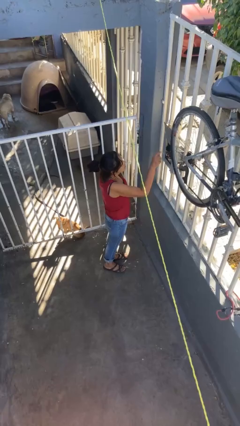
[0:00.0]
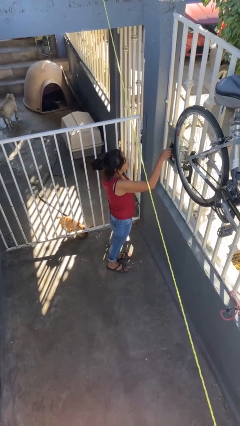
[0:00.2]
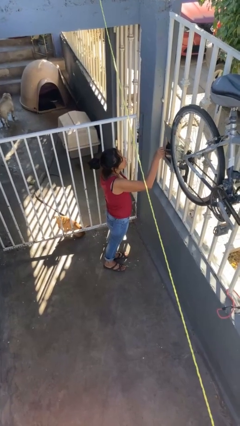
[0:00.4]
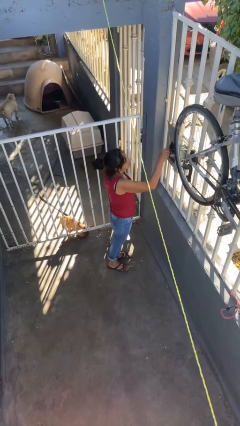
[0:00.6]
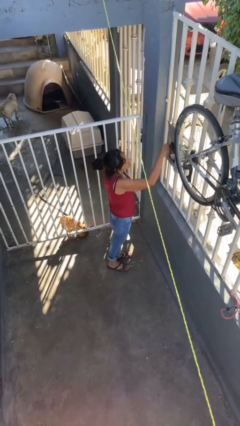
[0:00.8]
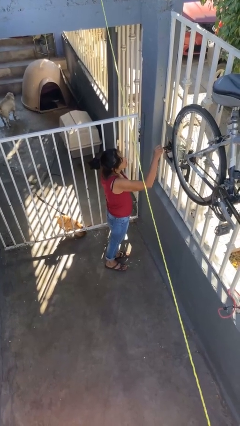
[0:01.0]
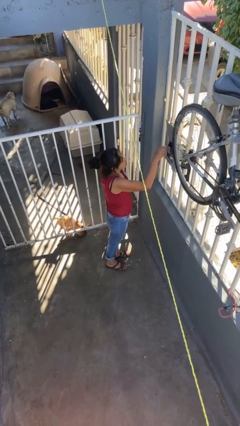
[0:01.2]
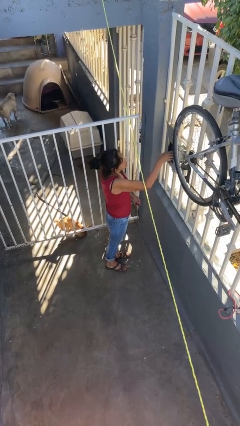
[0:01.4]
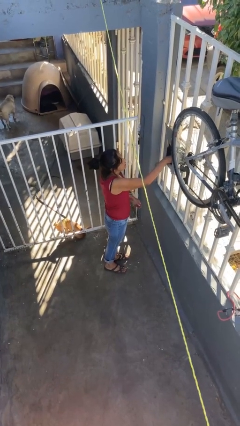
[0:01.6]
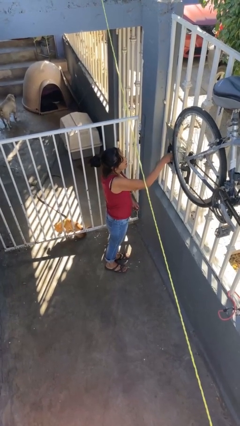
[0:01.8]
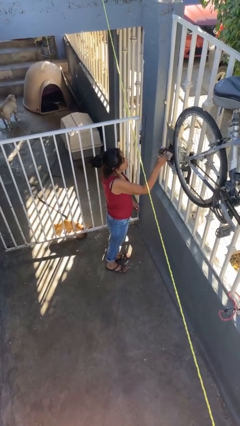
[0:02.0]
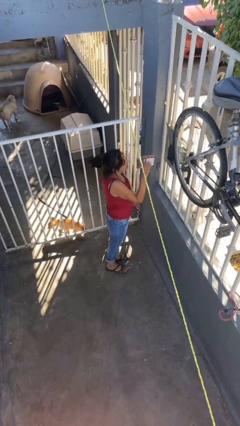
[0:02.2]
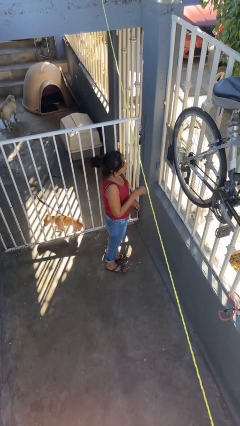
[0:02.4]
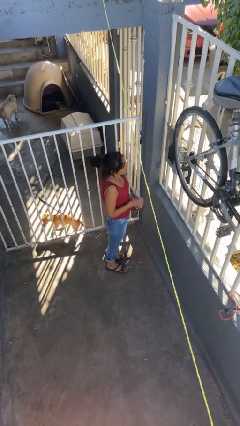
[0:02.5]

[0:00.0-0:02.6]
person takes letters from mailbox

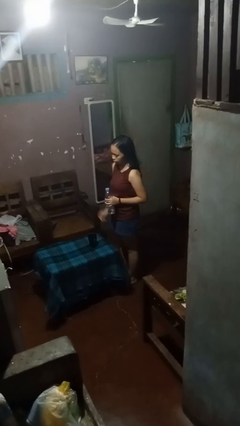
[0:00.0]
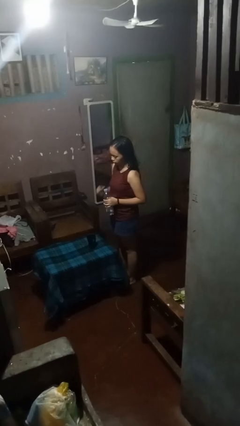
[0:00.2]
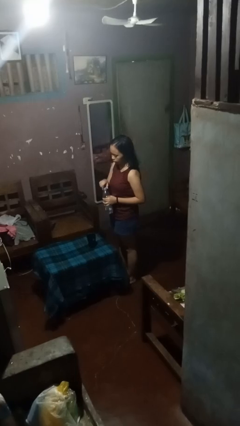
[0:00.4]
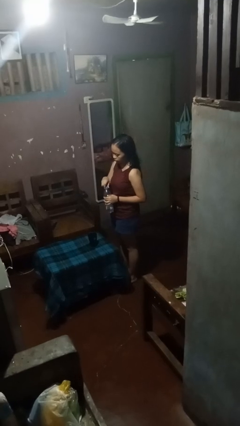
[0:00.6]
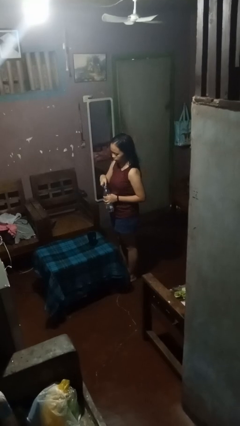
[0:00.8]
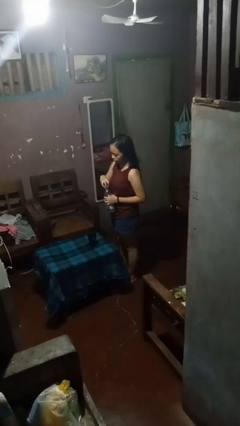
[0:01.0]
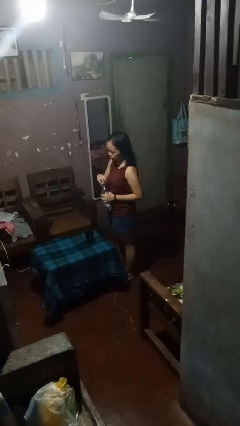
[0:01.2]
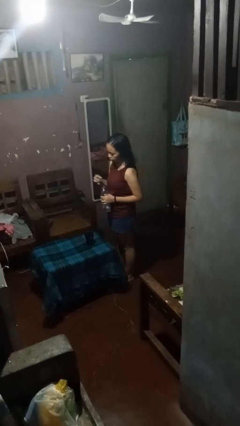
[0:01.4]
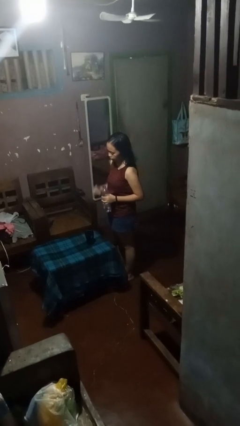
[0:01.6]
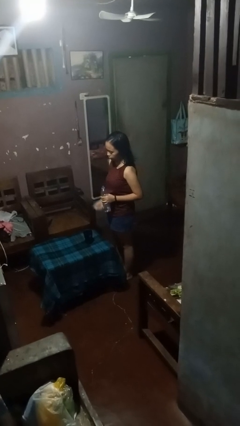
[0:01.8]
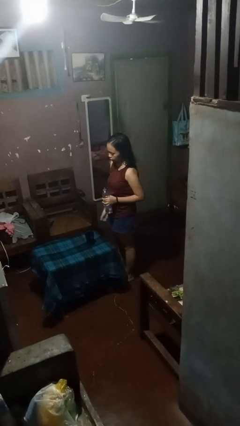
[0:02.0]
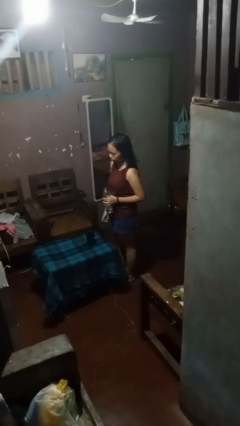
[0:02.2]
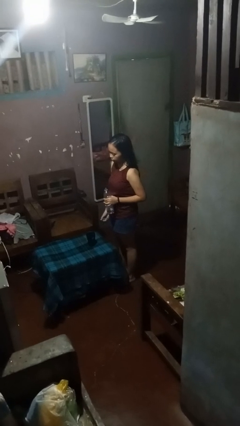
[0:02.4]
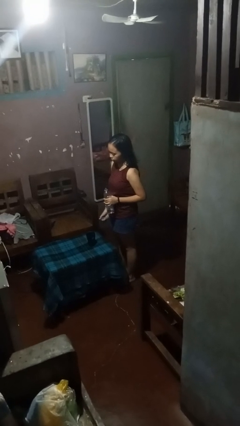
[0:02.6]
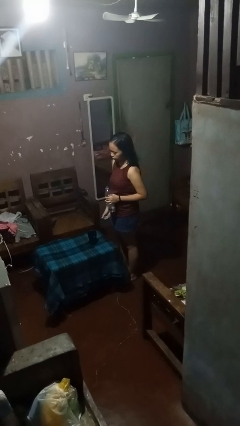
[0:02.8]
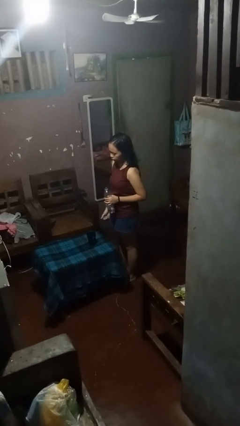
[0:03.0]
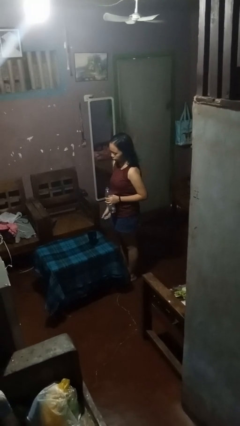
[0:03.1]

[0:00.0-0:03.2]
person unscrews lid from bottle

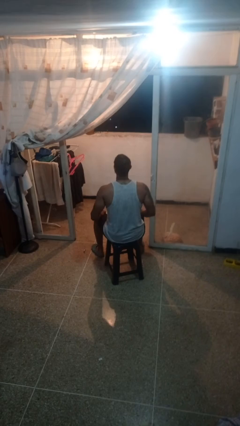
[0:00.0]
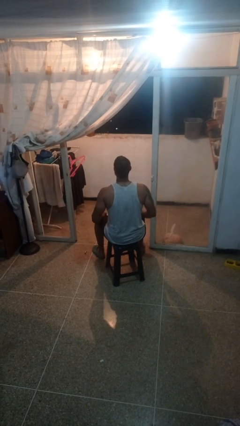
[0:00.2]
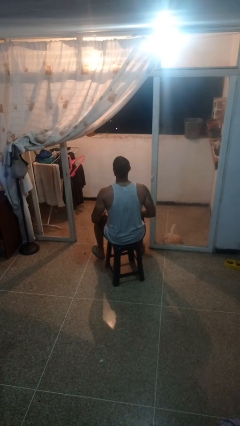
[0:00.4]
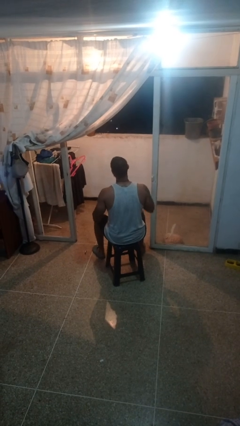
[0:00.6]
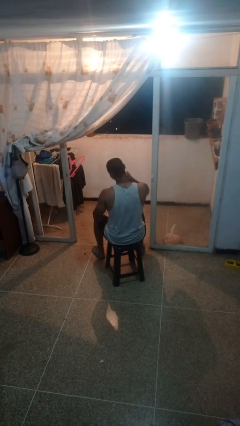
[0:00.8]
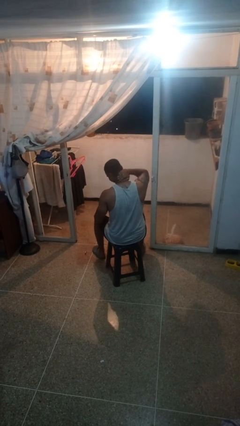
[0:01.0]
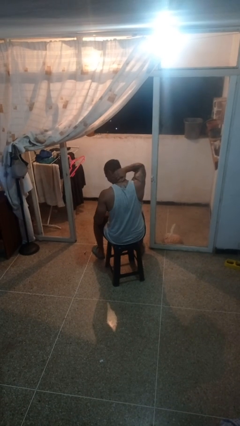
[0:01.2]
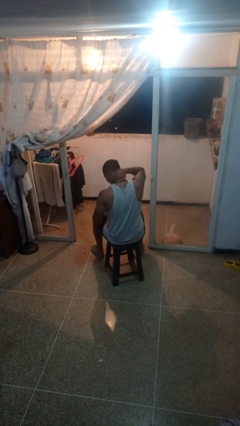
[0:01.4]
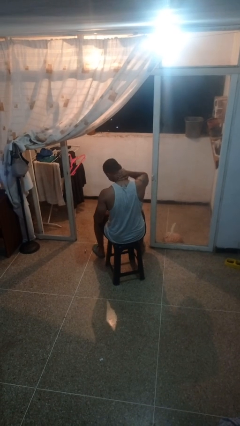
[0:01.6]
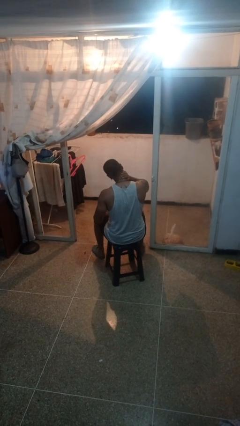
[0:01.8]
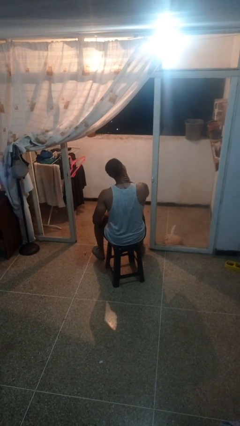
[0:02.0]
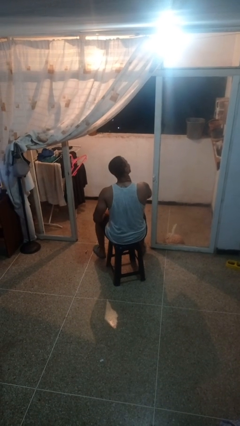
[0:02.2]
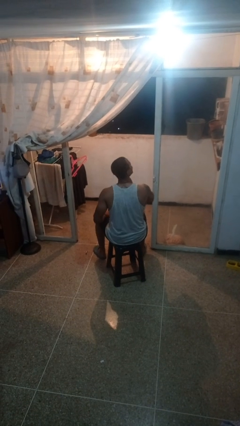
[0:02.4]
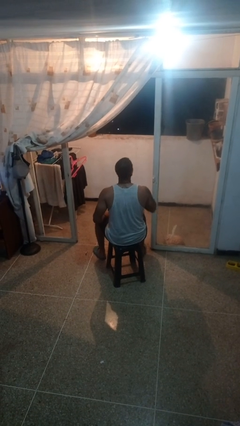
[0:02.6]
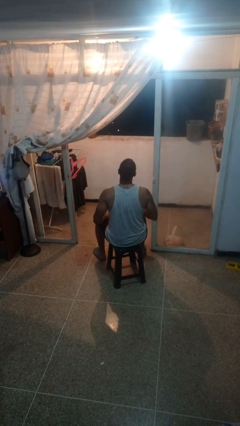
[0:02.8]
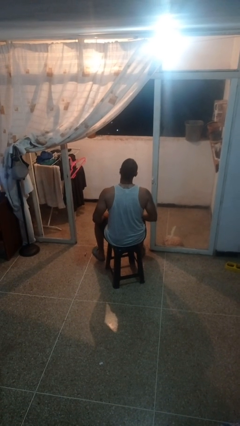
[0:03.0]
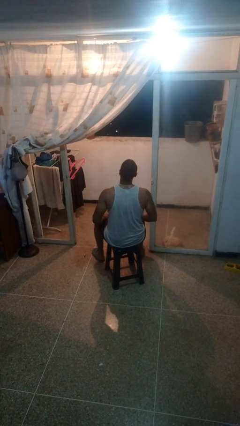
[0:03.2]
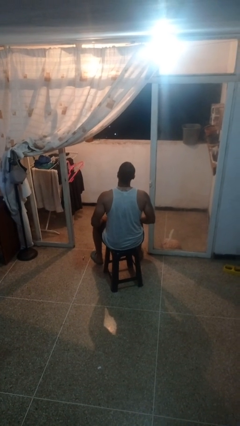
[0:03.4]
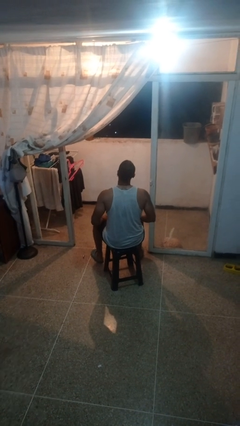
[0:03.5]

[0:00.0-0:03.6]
person rubs neck

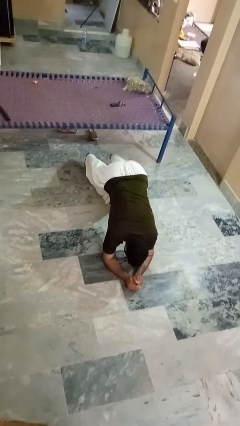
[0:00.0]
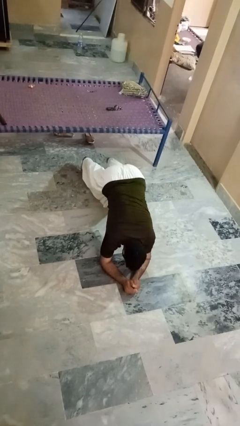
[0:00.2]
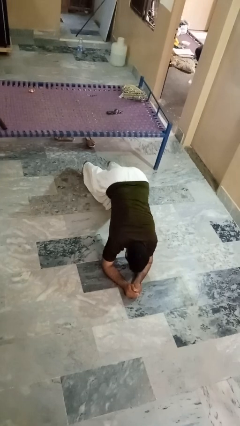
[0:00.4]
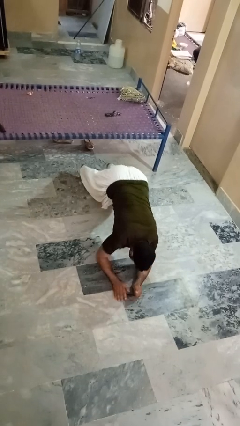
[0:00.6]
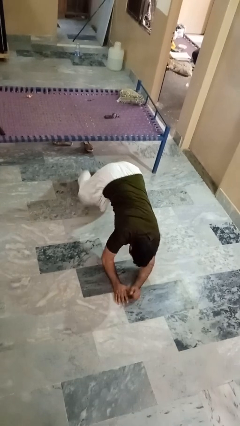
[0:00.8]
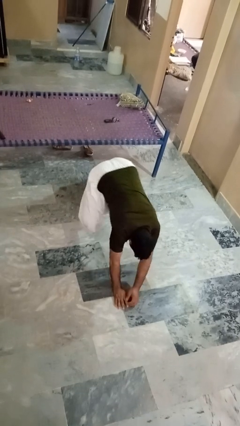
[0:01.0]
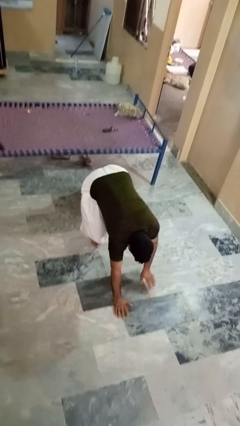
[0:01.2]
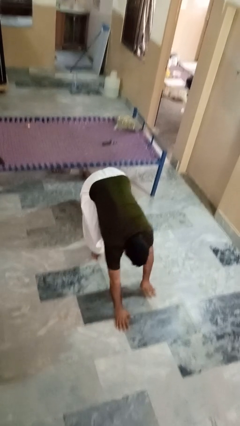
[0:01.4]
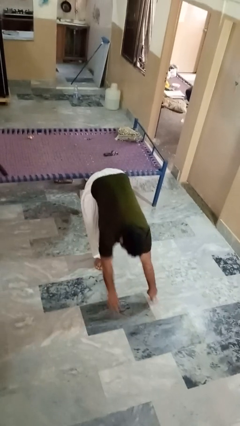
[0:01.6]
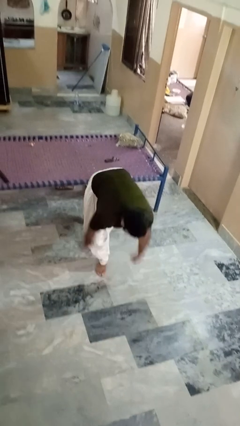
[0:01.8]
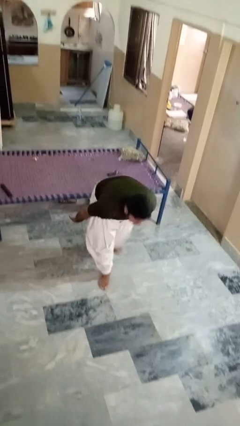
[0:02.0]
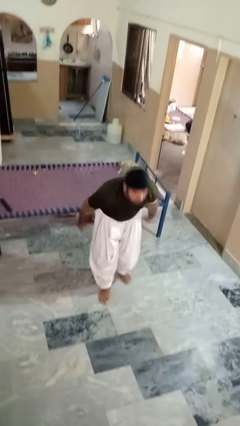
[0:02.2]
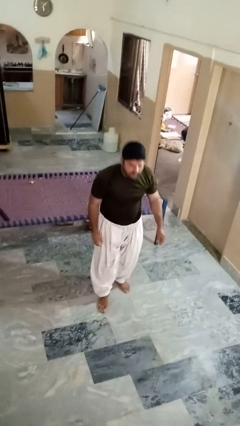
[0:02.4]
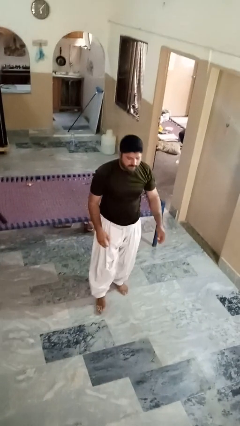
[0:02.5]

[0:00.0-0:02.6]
person stands up from floor

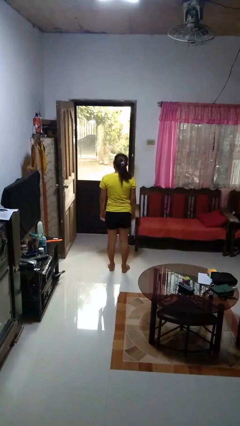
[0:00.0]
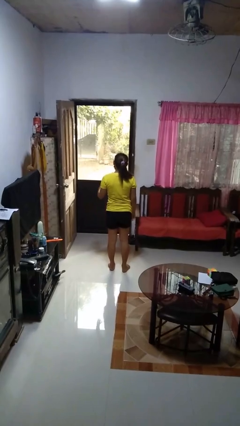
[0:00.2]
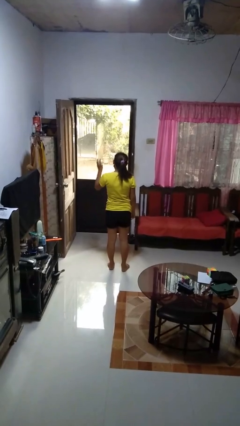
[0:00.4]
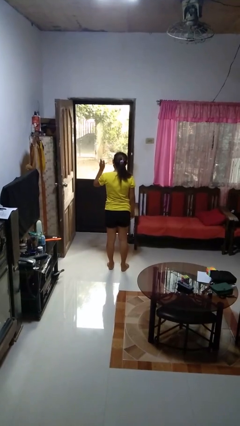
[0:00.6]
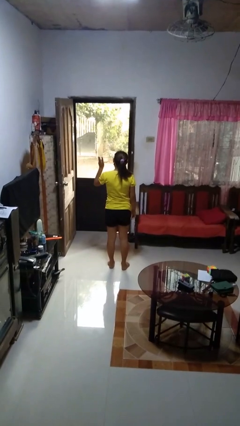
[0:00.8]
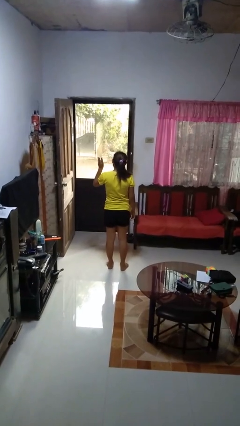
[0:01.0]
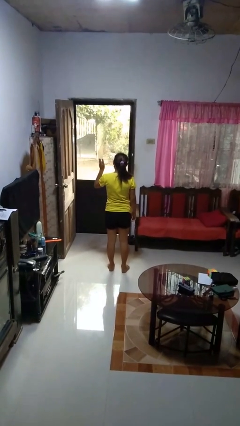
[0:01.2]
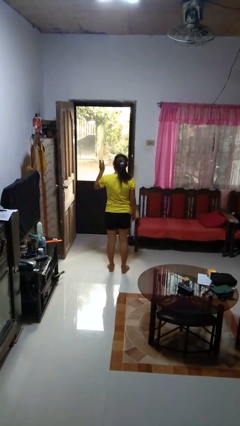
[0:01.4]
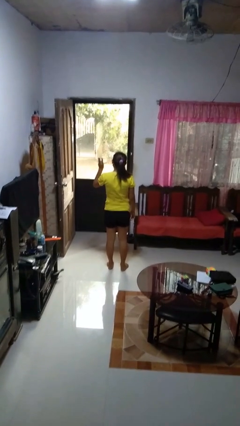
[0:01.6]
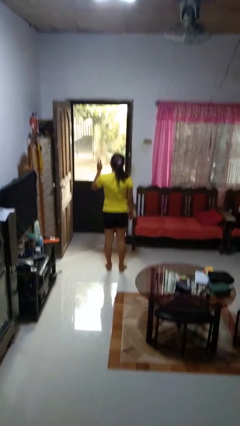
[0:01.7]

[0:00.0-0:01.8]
person gestures number three

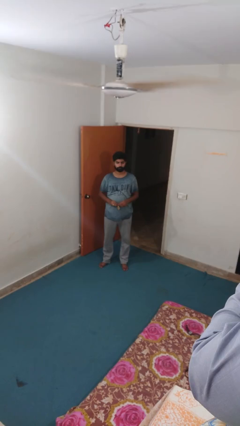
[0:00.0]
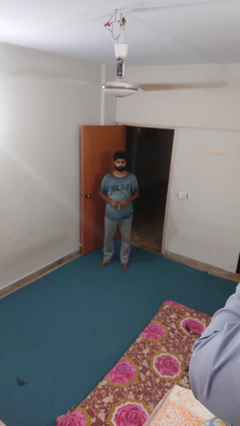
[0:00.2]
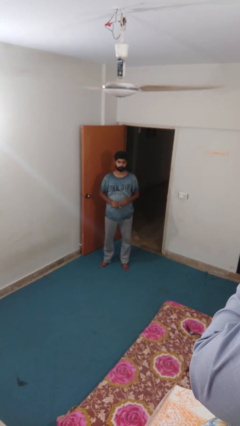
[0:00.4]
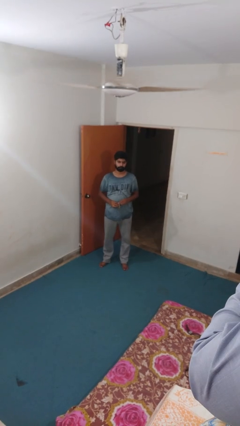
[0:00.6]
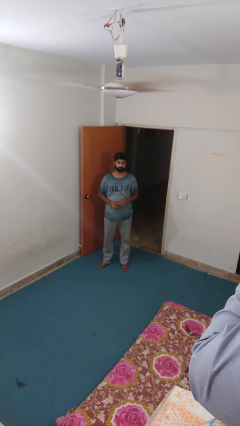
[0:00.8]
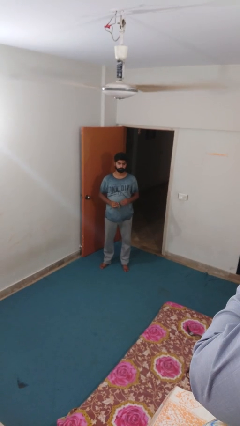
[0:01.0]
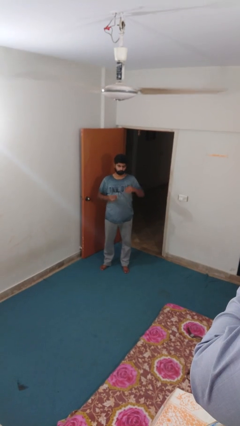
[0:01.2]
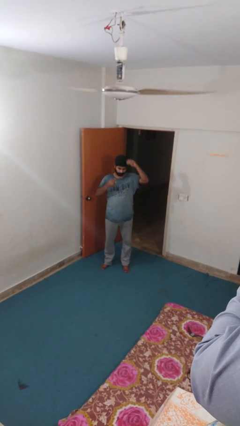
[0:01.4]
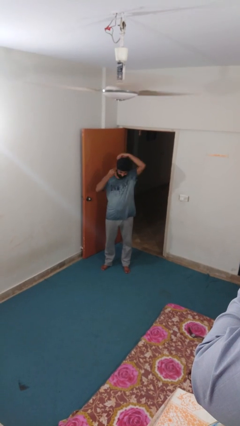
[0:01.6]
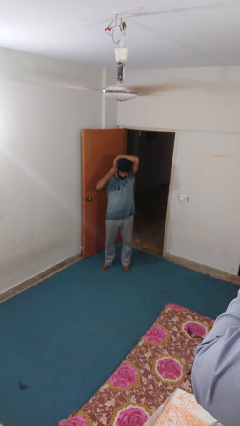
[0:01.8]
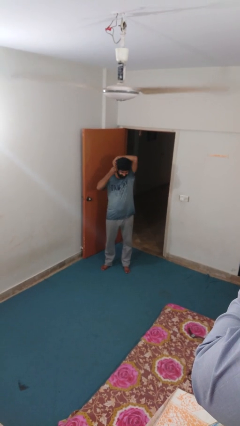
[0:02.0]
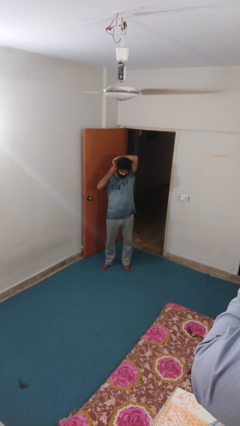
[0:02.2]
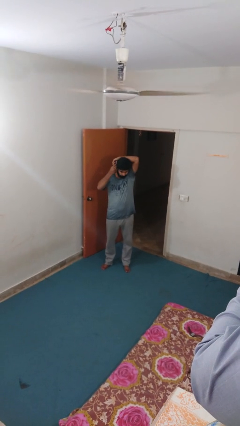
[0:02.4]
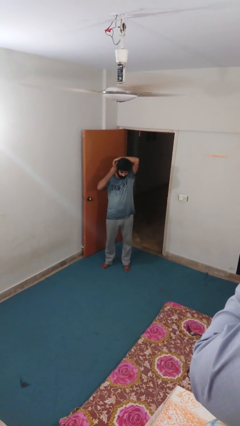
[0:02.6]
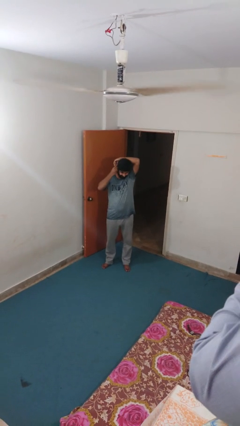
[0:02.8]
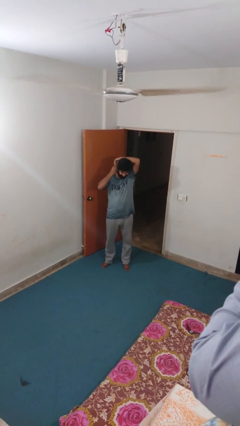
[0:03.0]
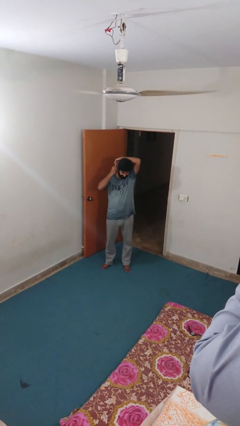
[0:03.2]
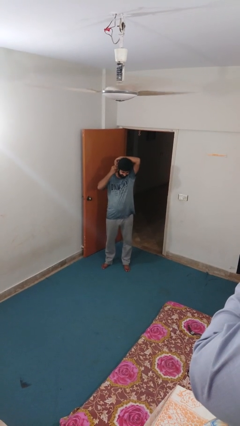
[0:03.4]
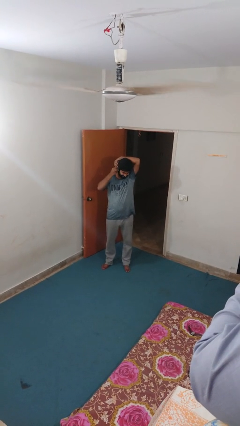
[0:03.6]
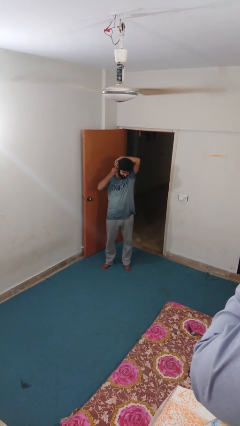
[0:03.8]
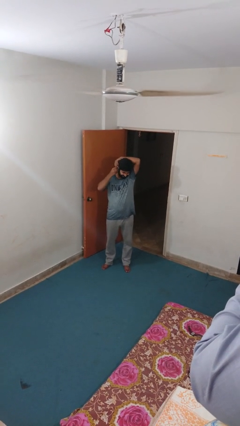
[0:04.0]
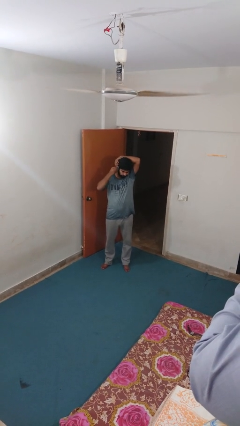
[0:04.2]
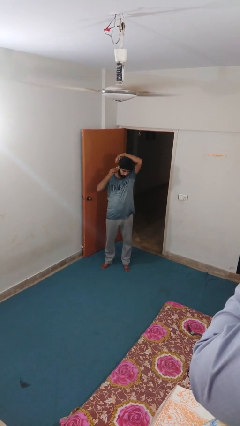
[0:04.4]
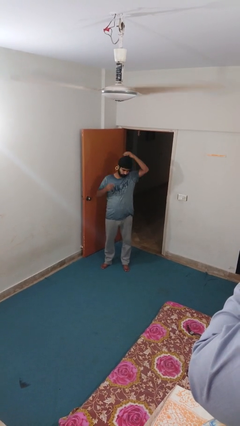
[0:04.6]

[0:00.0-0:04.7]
person puts on earrings
